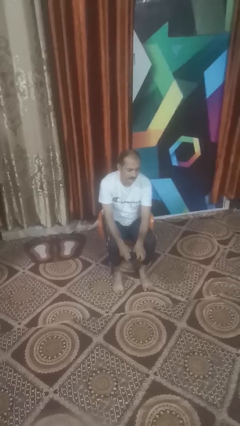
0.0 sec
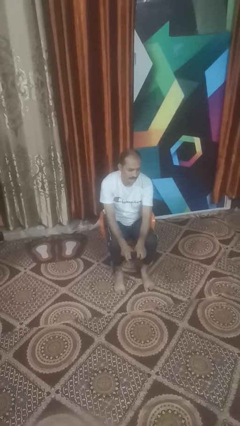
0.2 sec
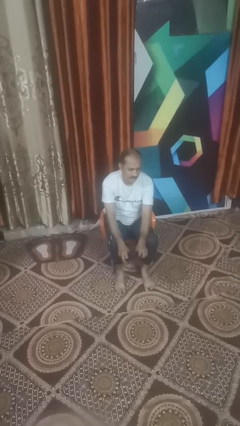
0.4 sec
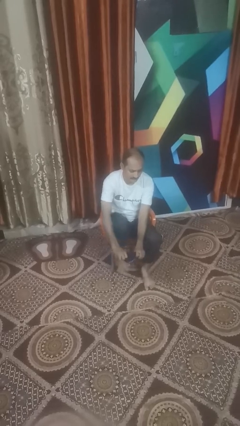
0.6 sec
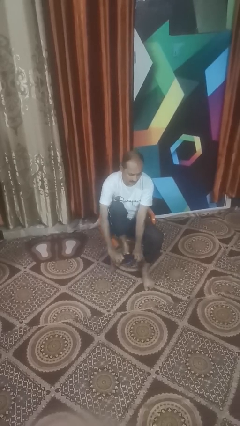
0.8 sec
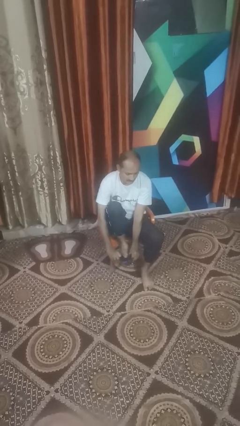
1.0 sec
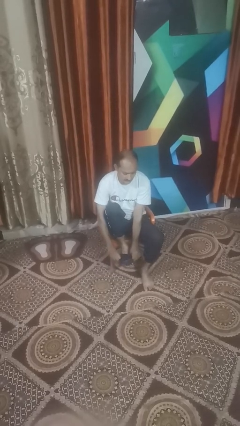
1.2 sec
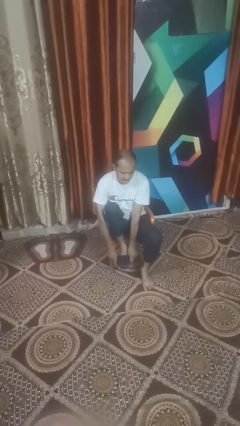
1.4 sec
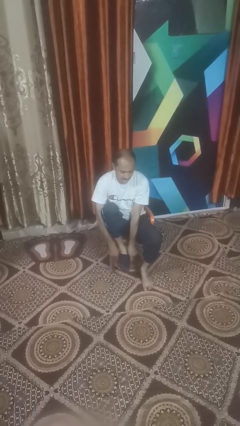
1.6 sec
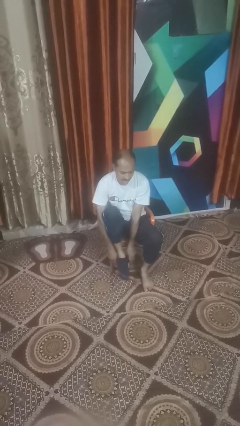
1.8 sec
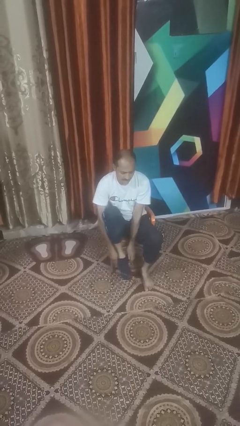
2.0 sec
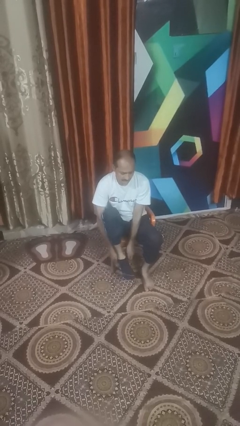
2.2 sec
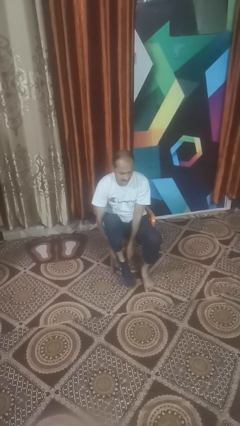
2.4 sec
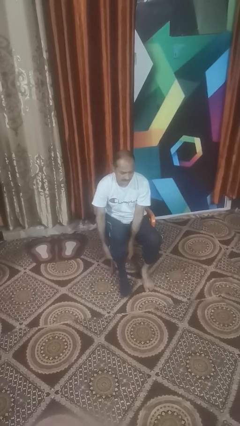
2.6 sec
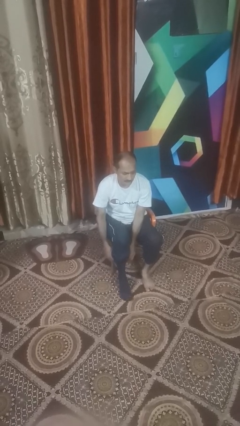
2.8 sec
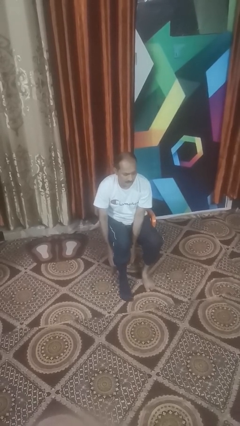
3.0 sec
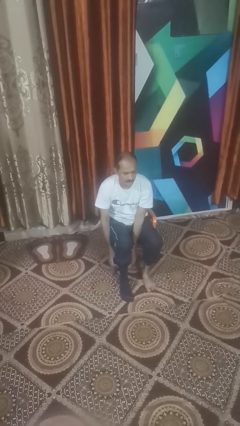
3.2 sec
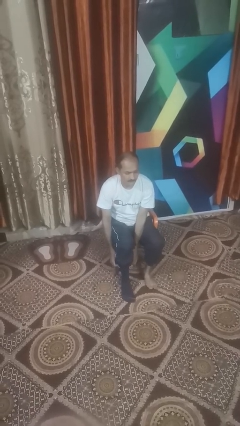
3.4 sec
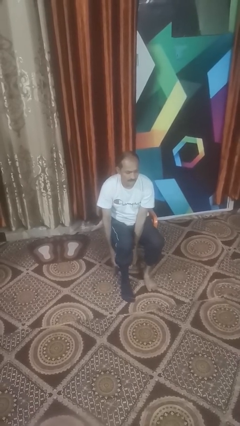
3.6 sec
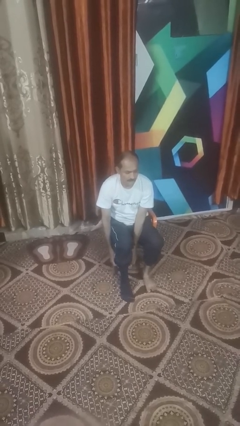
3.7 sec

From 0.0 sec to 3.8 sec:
person puts on socks

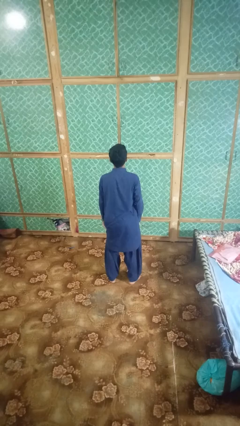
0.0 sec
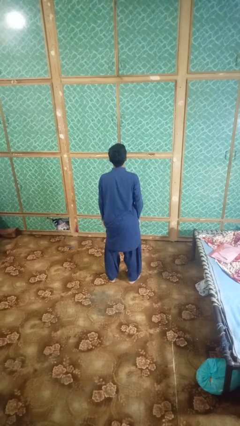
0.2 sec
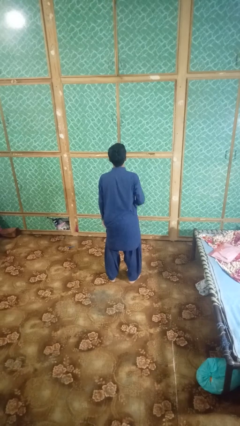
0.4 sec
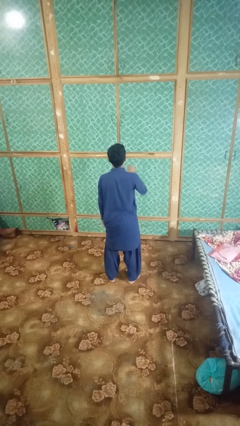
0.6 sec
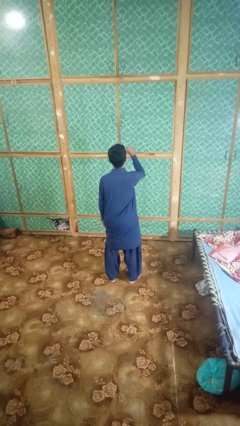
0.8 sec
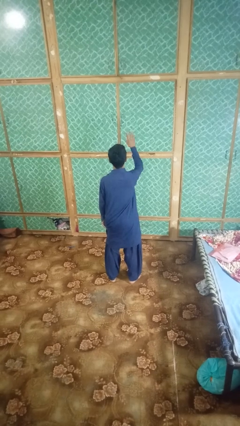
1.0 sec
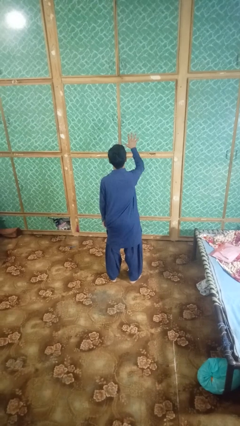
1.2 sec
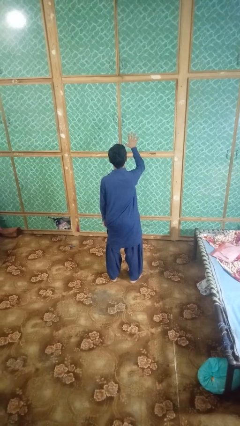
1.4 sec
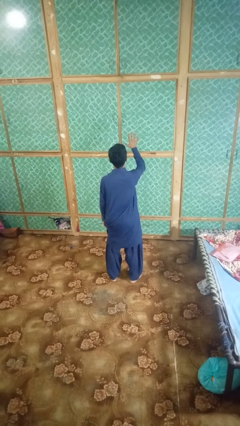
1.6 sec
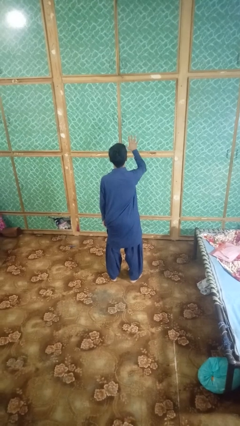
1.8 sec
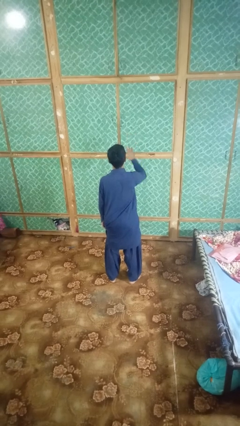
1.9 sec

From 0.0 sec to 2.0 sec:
person gestures number five

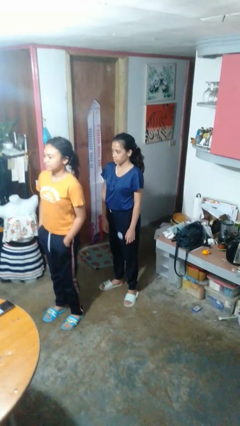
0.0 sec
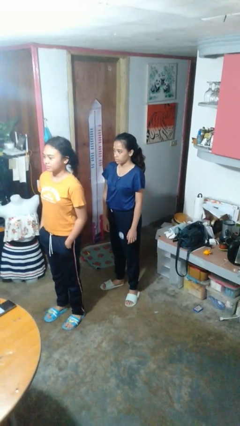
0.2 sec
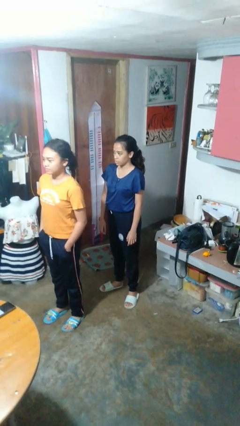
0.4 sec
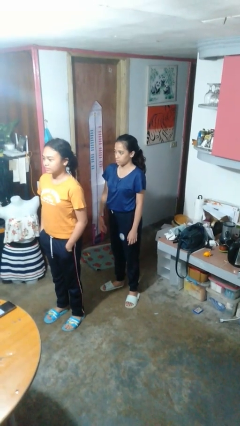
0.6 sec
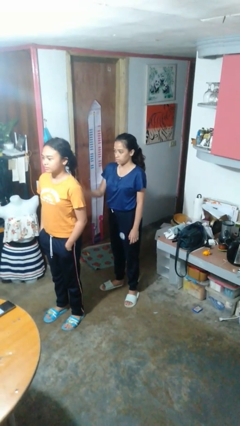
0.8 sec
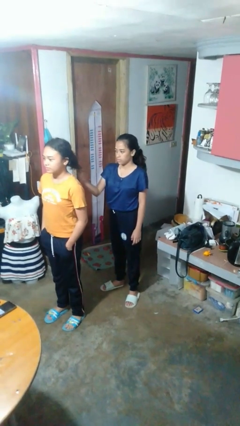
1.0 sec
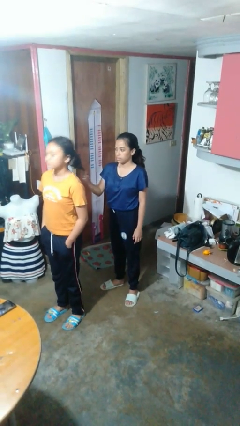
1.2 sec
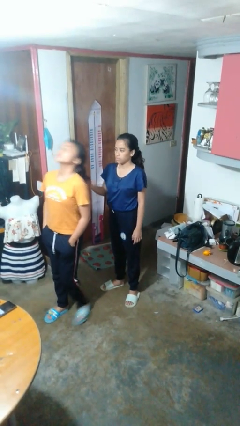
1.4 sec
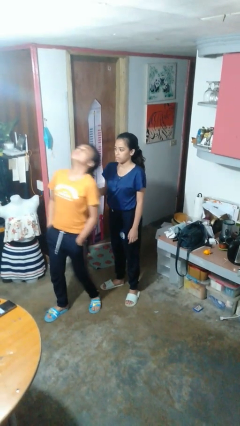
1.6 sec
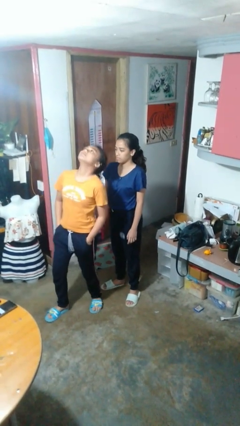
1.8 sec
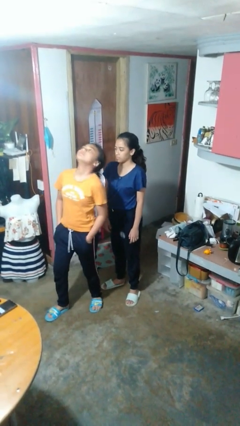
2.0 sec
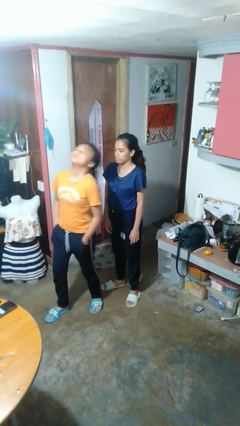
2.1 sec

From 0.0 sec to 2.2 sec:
person grabs person by hair

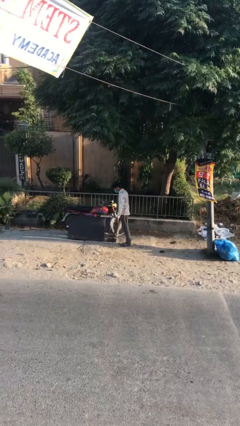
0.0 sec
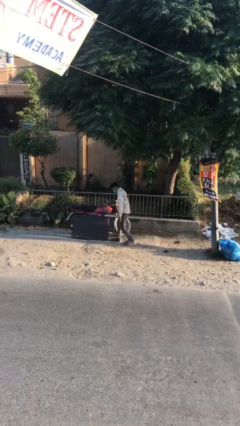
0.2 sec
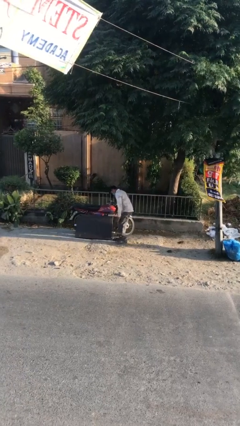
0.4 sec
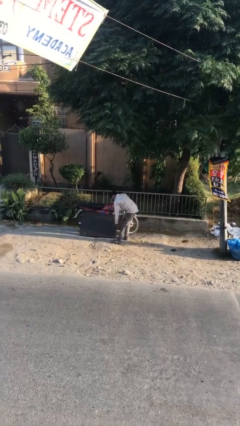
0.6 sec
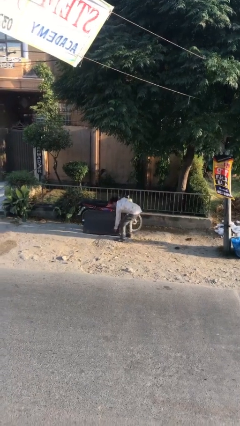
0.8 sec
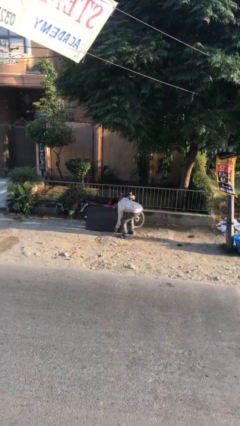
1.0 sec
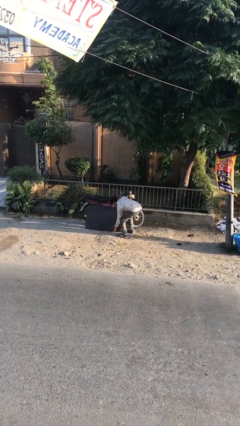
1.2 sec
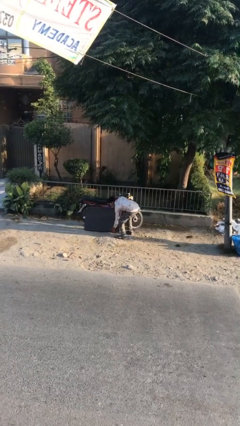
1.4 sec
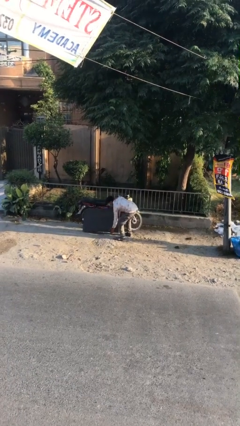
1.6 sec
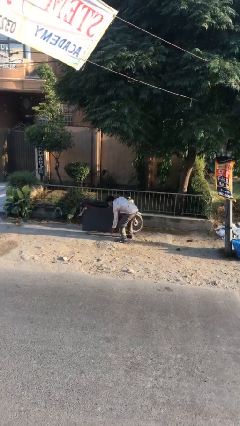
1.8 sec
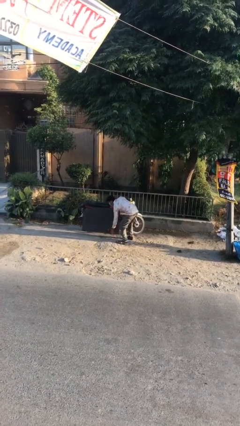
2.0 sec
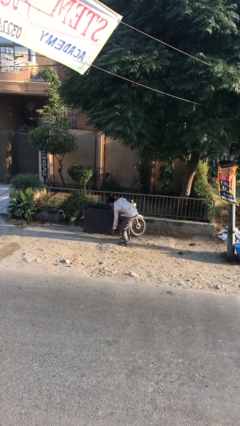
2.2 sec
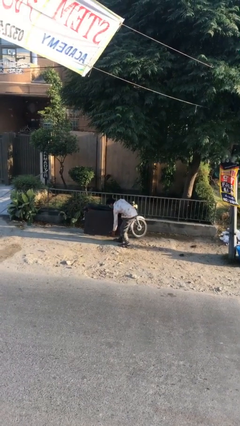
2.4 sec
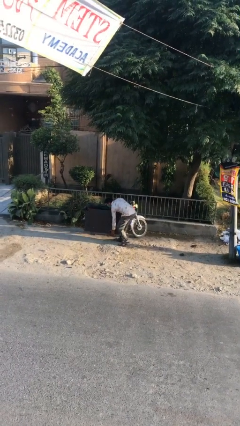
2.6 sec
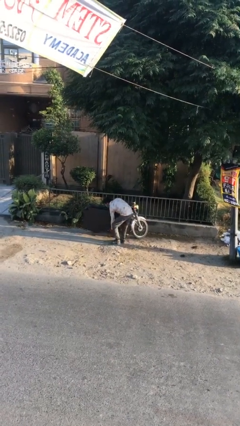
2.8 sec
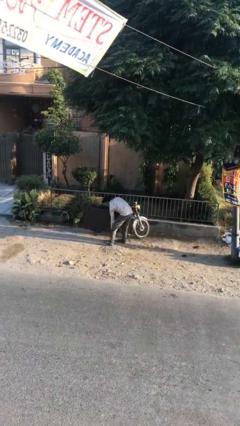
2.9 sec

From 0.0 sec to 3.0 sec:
person picks up object from floor

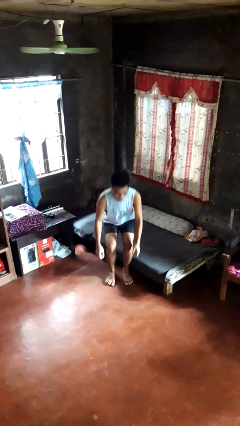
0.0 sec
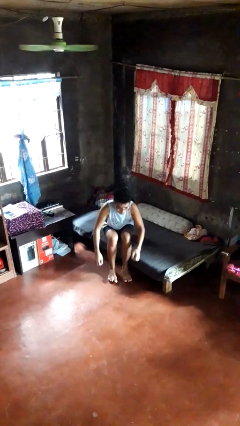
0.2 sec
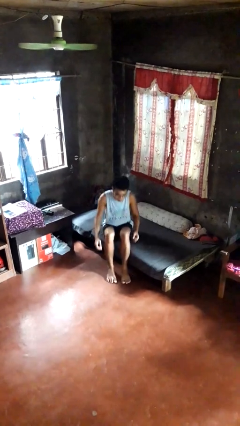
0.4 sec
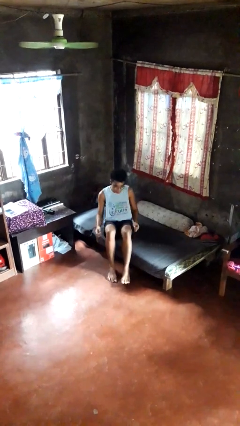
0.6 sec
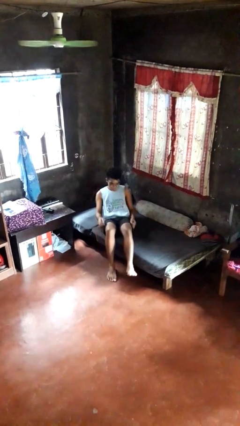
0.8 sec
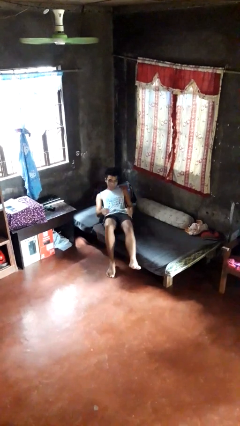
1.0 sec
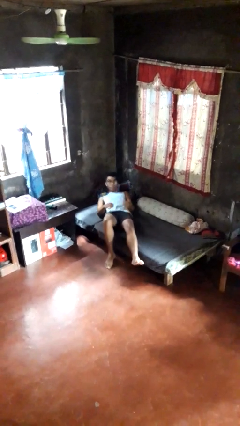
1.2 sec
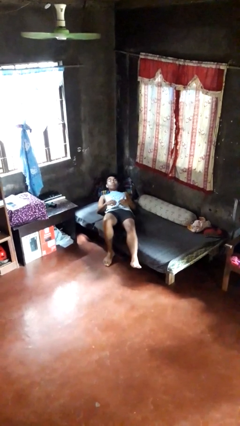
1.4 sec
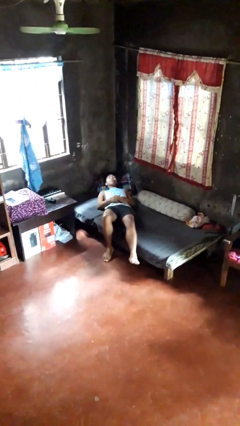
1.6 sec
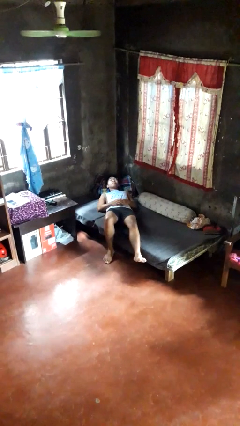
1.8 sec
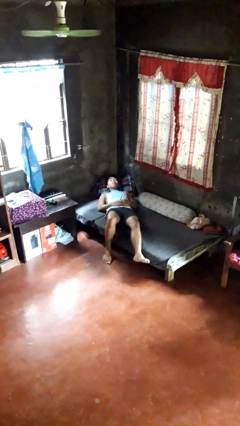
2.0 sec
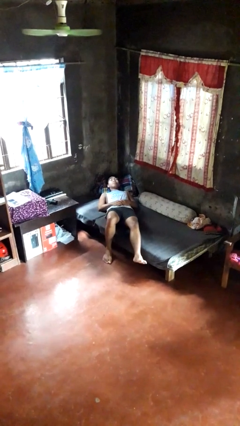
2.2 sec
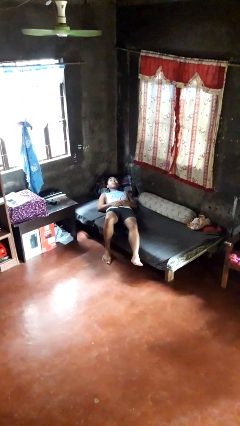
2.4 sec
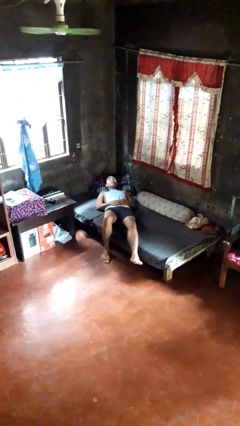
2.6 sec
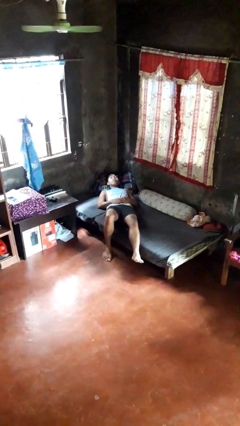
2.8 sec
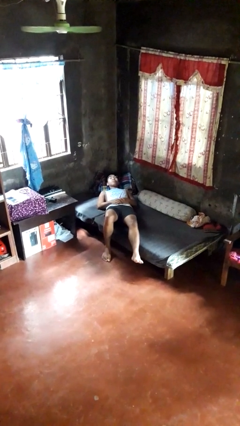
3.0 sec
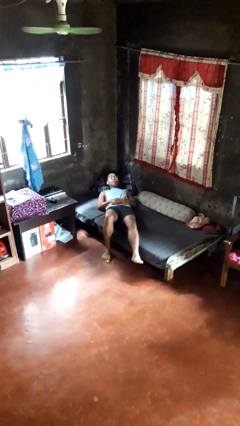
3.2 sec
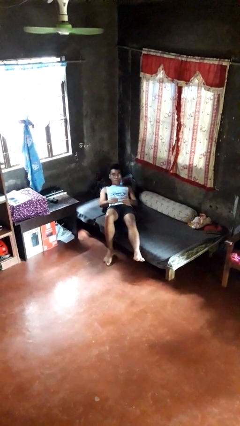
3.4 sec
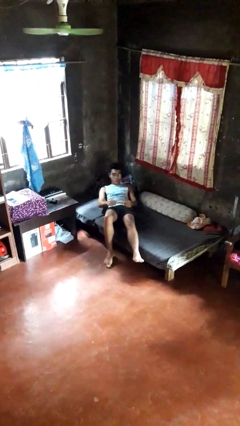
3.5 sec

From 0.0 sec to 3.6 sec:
person lies down on bed

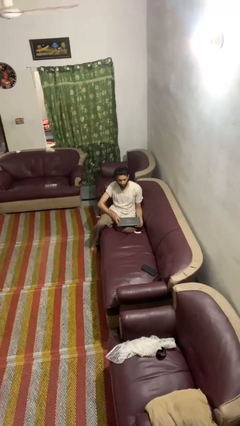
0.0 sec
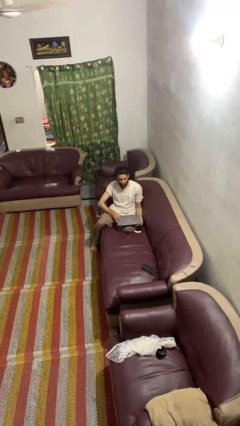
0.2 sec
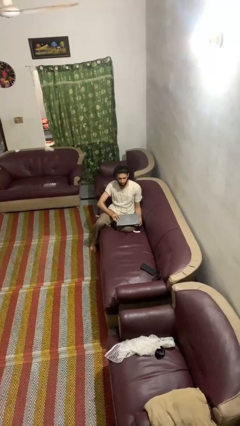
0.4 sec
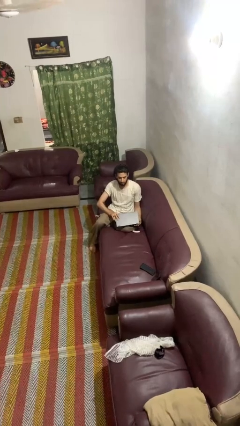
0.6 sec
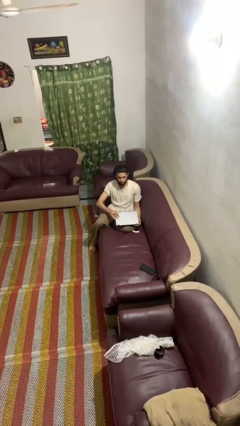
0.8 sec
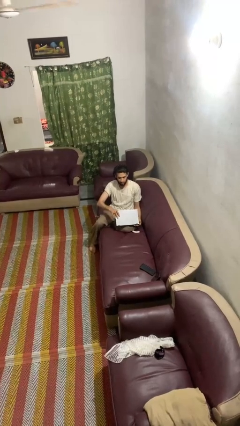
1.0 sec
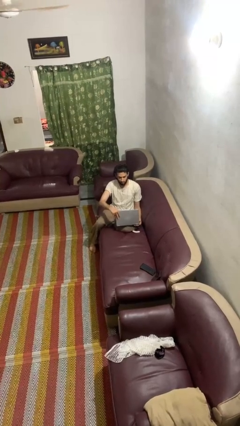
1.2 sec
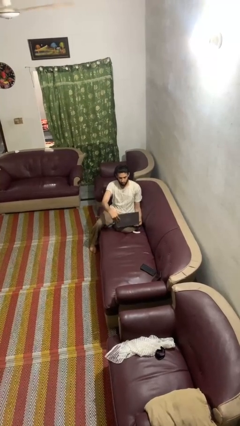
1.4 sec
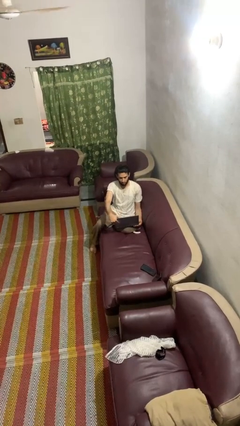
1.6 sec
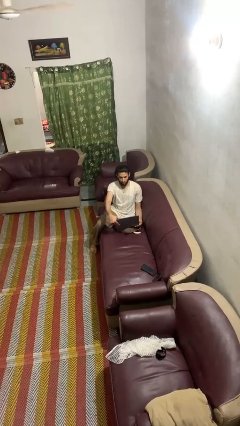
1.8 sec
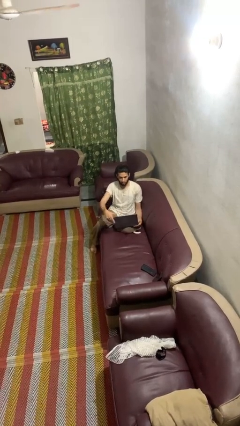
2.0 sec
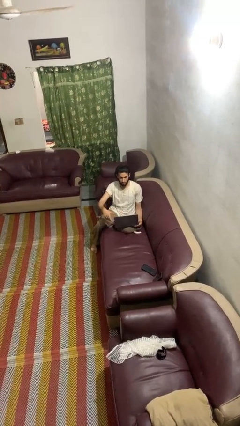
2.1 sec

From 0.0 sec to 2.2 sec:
person opens laptop
